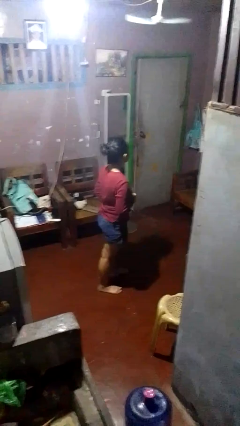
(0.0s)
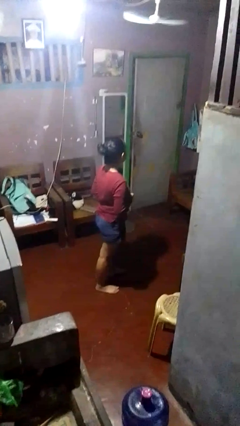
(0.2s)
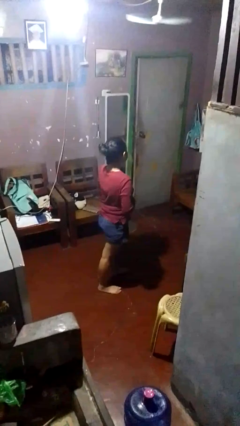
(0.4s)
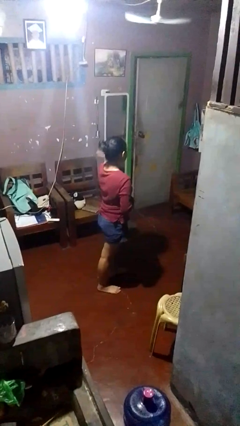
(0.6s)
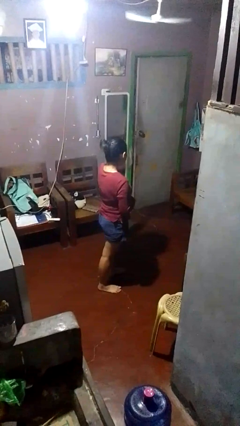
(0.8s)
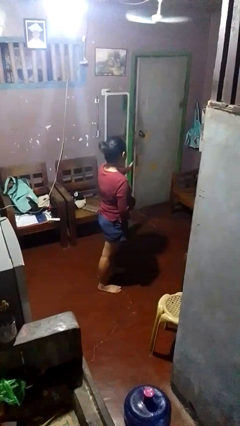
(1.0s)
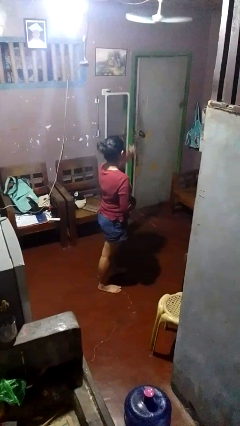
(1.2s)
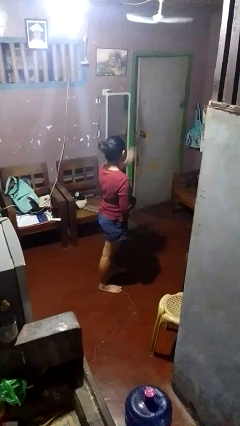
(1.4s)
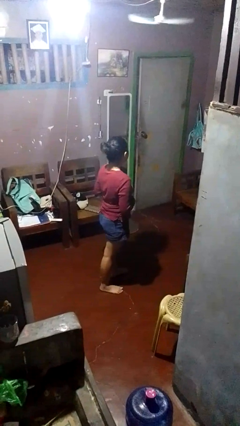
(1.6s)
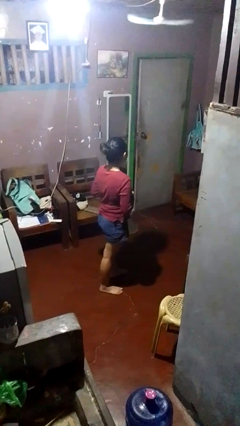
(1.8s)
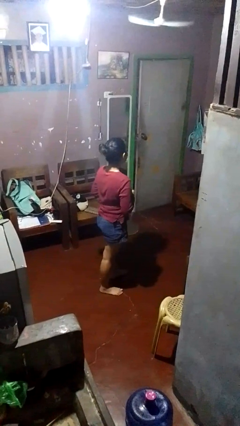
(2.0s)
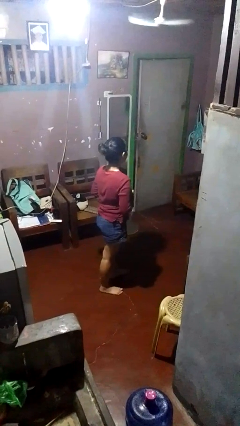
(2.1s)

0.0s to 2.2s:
person karate chop

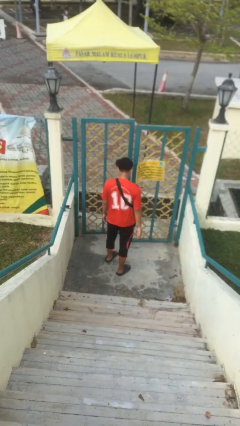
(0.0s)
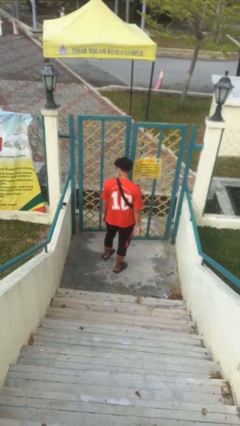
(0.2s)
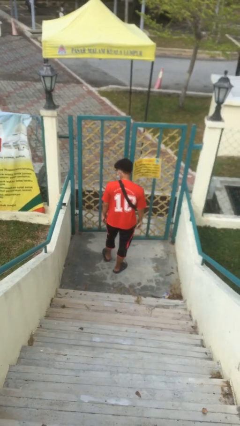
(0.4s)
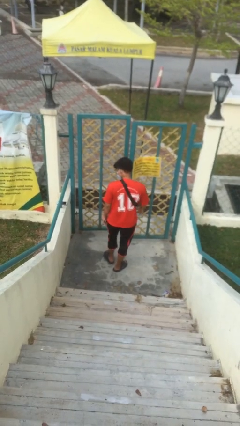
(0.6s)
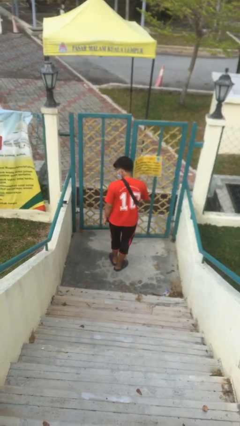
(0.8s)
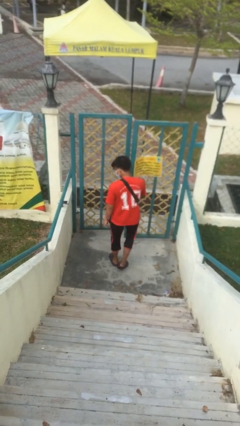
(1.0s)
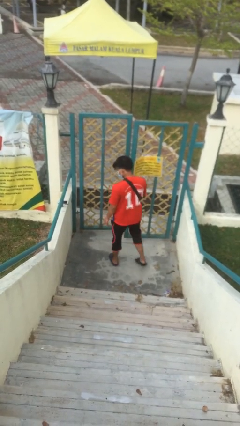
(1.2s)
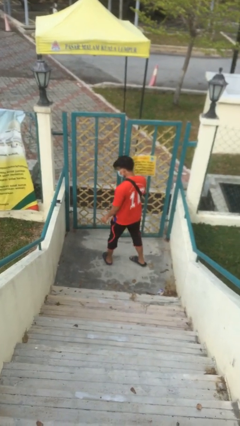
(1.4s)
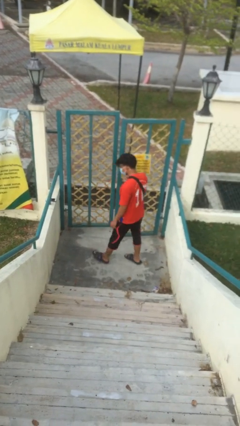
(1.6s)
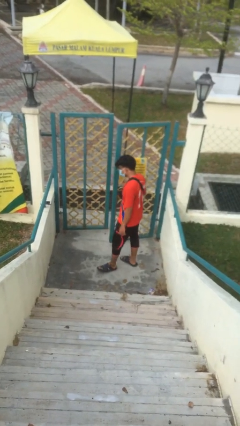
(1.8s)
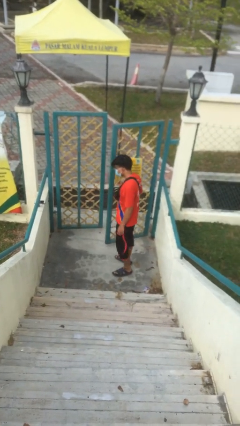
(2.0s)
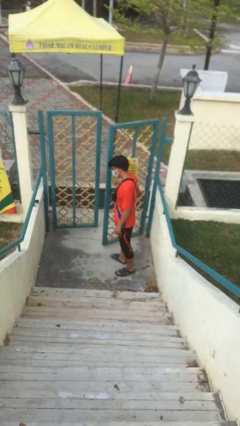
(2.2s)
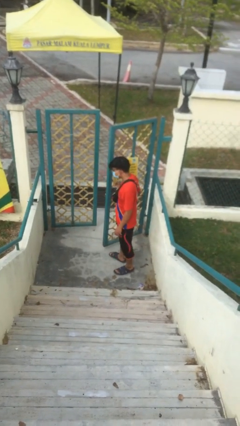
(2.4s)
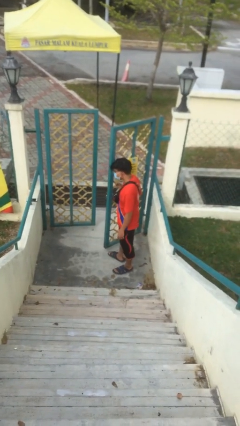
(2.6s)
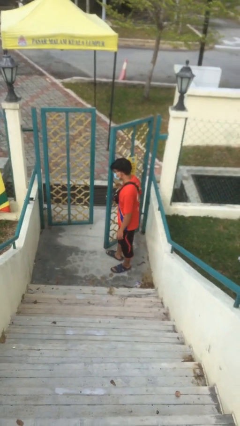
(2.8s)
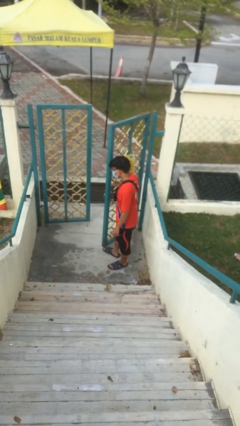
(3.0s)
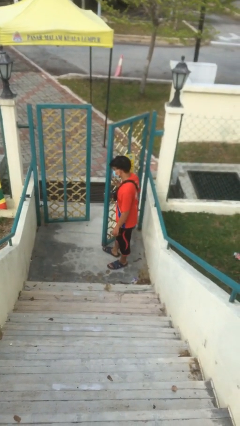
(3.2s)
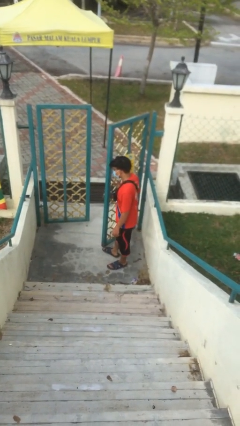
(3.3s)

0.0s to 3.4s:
person opens facility door

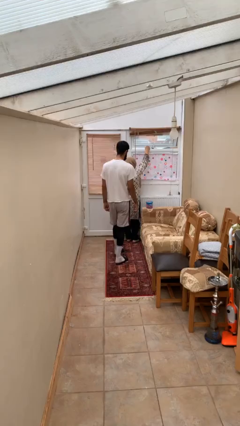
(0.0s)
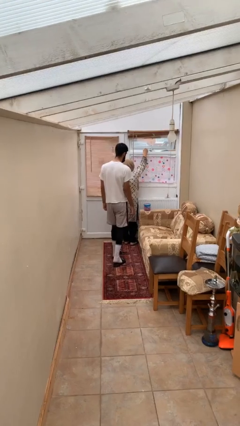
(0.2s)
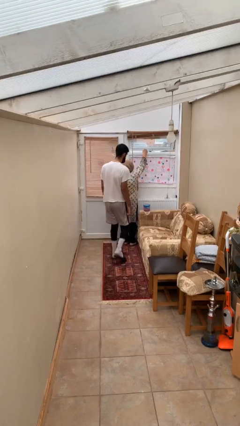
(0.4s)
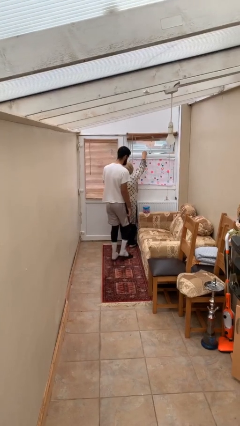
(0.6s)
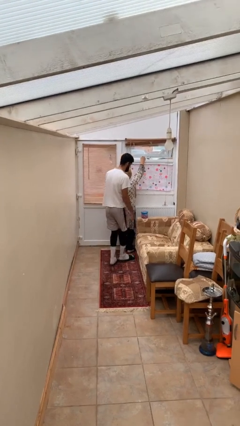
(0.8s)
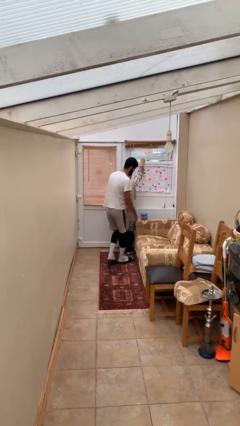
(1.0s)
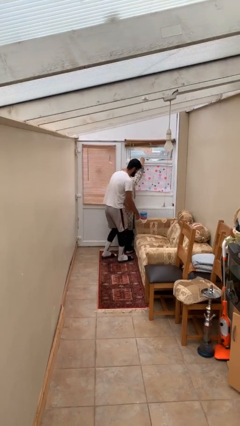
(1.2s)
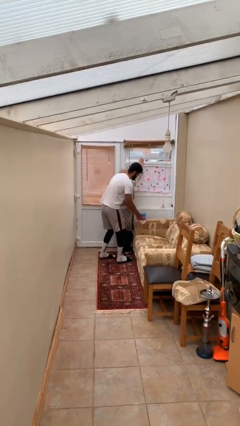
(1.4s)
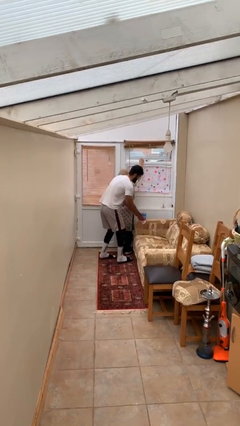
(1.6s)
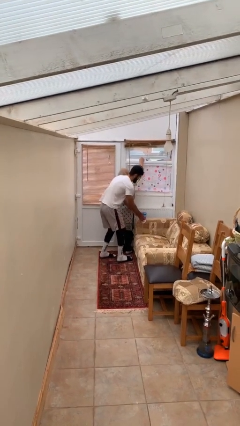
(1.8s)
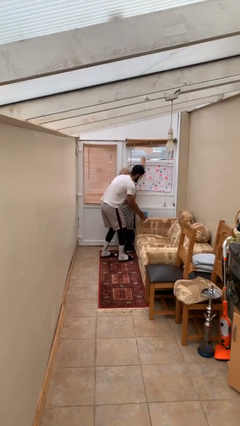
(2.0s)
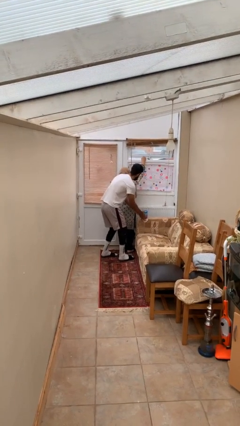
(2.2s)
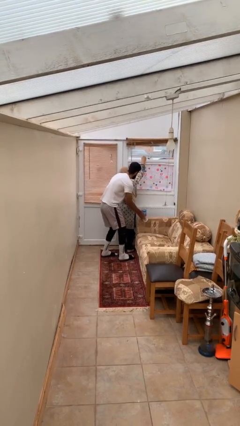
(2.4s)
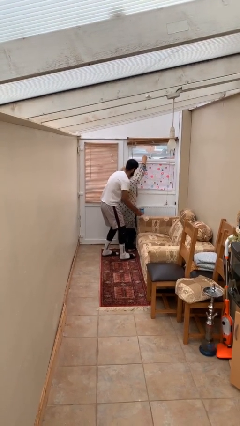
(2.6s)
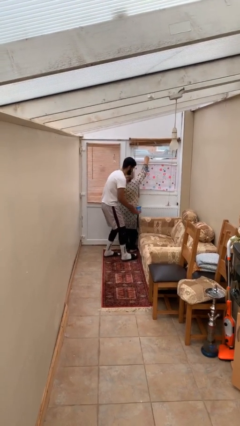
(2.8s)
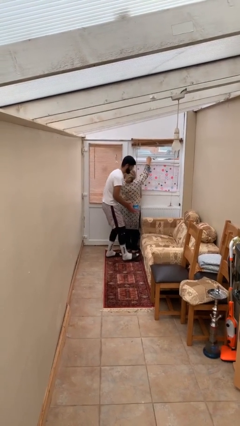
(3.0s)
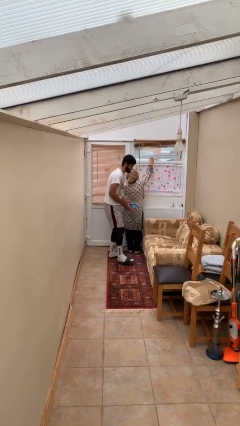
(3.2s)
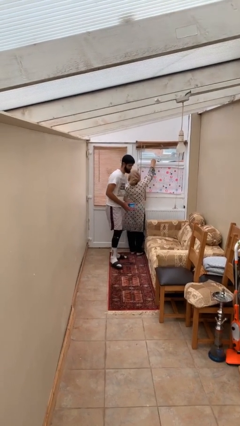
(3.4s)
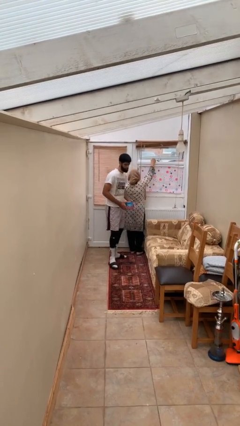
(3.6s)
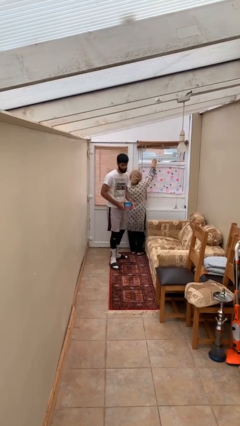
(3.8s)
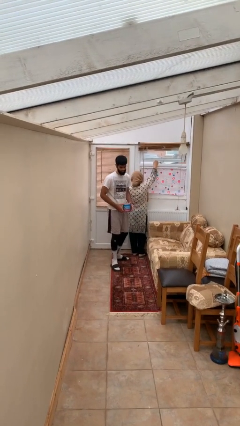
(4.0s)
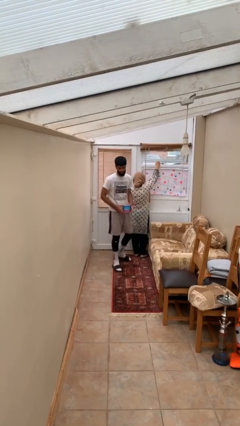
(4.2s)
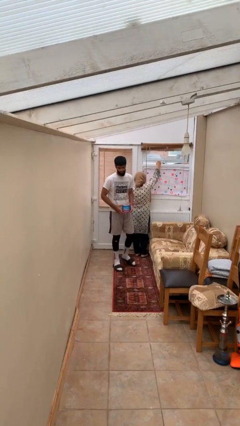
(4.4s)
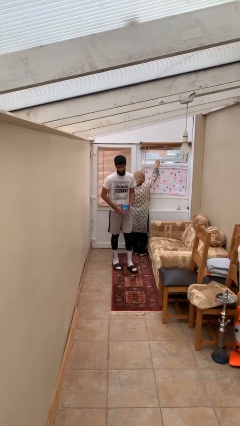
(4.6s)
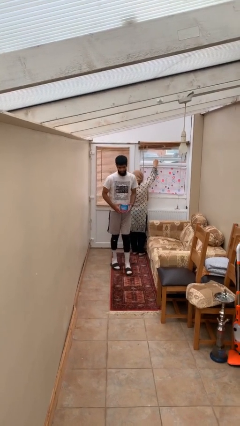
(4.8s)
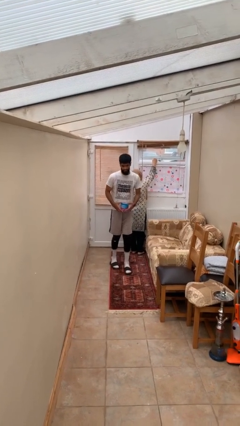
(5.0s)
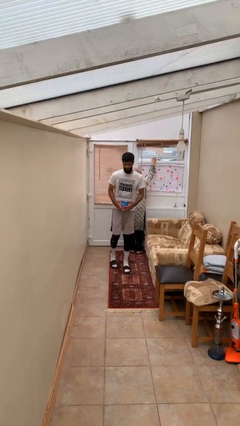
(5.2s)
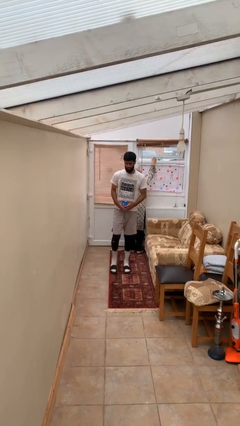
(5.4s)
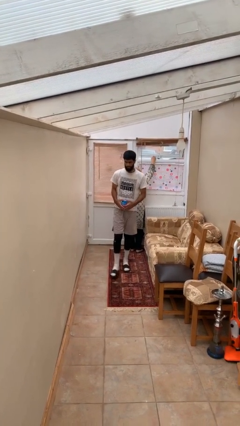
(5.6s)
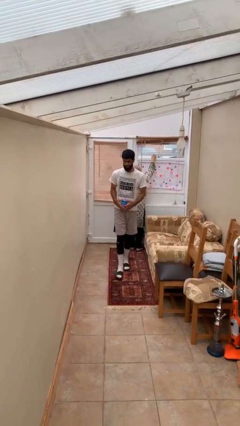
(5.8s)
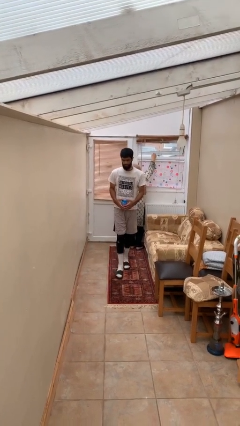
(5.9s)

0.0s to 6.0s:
person steals object from person

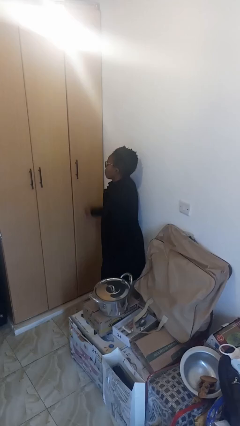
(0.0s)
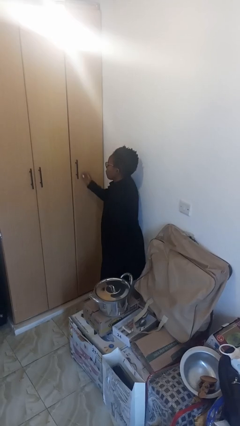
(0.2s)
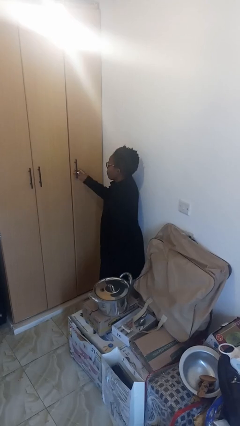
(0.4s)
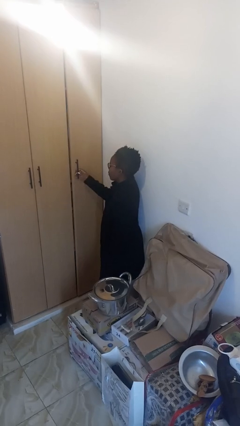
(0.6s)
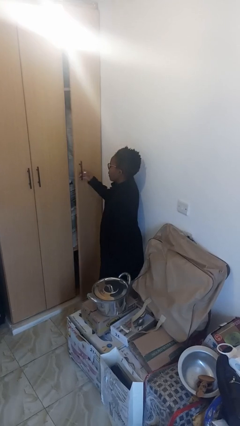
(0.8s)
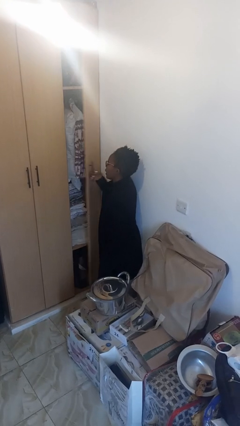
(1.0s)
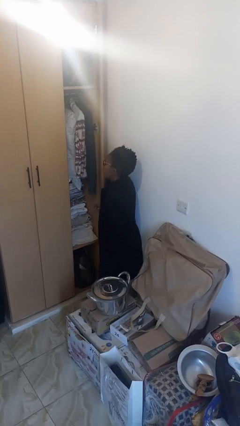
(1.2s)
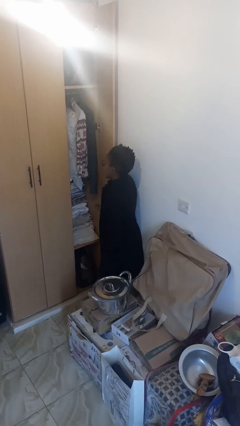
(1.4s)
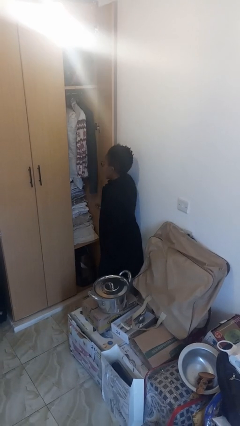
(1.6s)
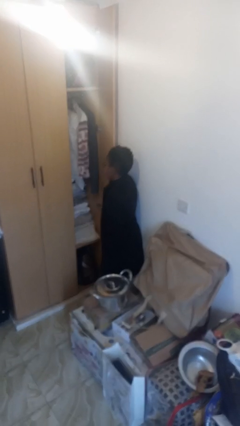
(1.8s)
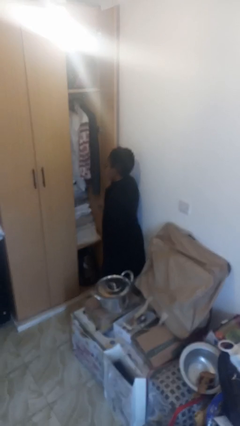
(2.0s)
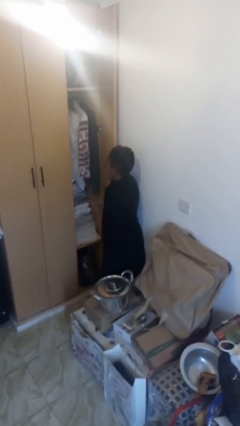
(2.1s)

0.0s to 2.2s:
person opens closet door

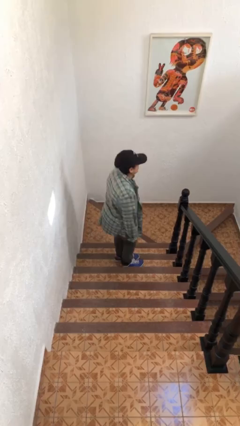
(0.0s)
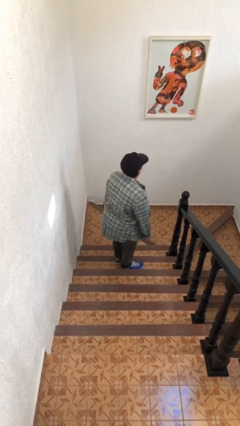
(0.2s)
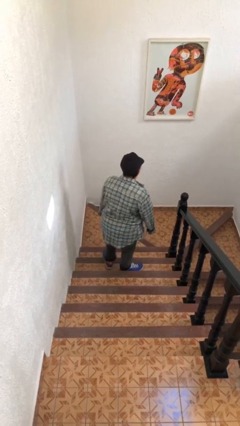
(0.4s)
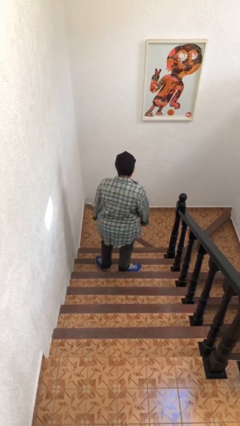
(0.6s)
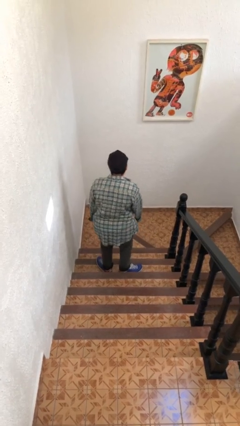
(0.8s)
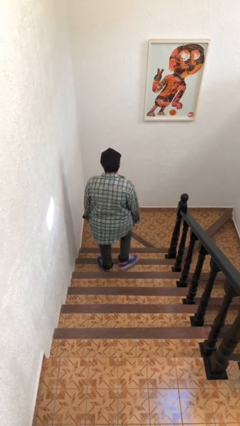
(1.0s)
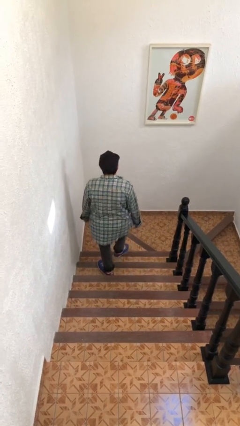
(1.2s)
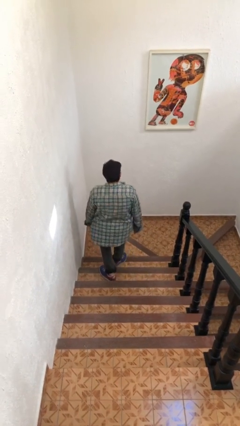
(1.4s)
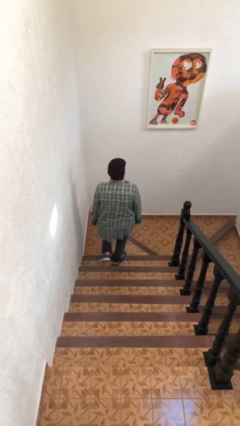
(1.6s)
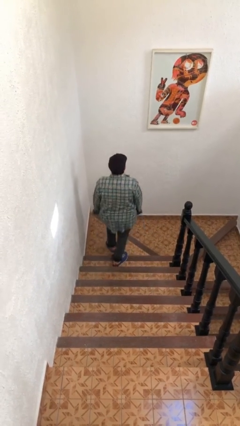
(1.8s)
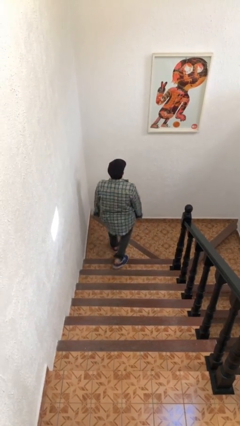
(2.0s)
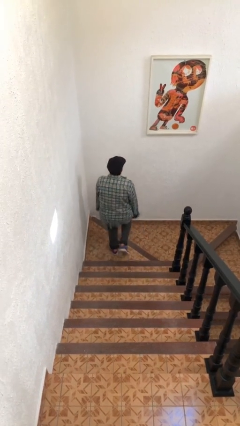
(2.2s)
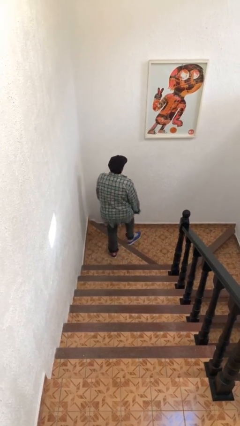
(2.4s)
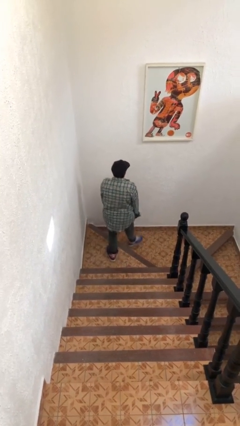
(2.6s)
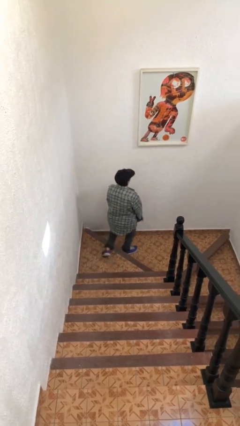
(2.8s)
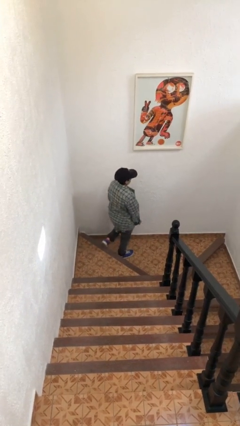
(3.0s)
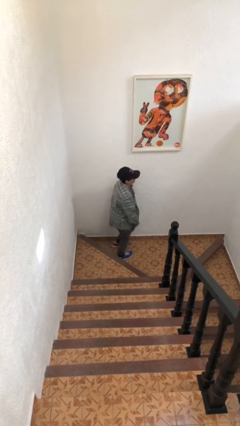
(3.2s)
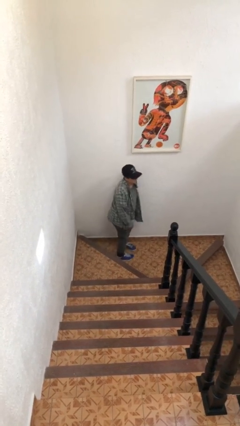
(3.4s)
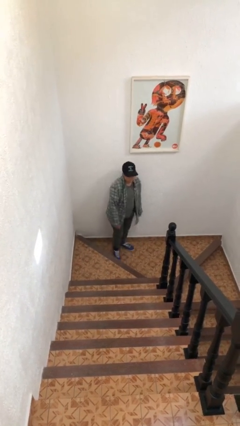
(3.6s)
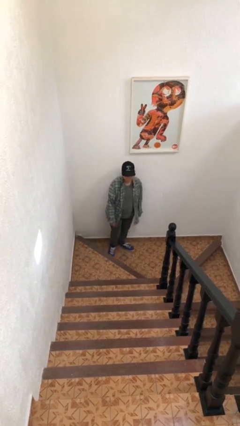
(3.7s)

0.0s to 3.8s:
person climbs down stairs

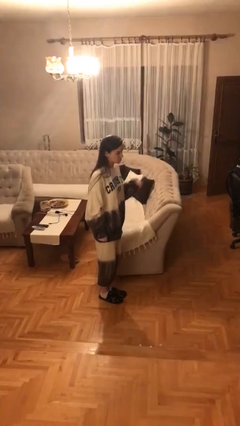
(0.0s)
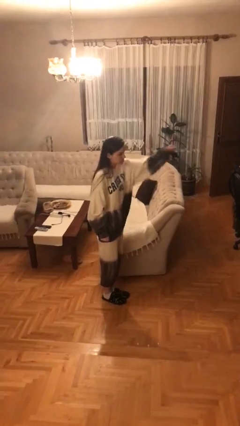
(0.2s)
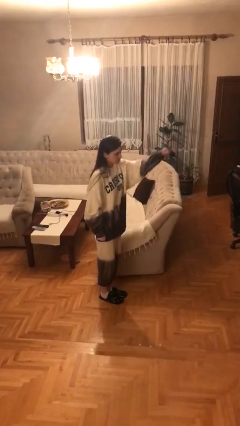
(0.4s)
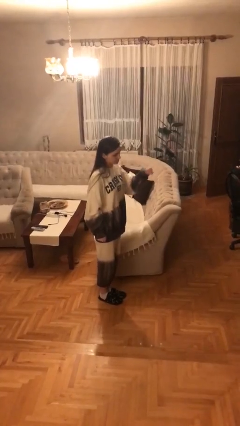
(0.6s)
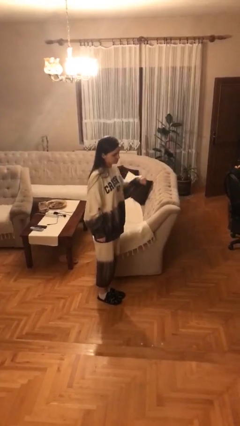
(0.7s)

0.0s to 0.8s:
person punches
